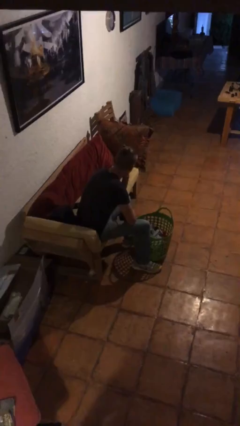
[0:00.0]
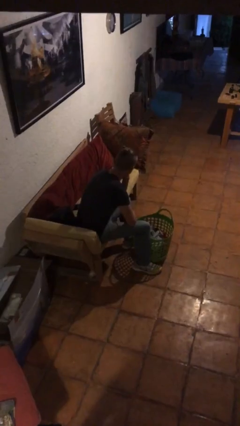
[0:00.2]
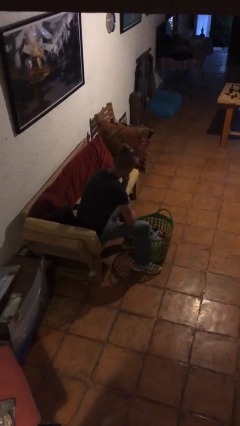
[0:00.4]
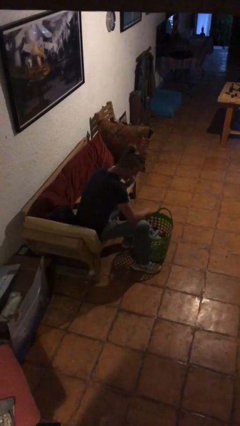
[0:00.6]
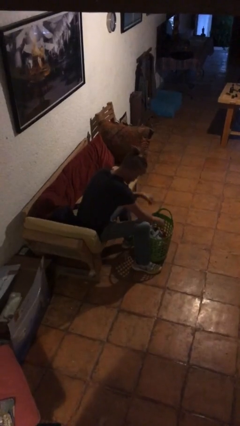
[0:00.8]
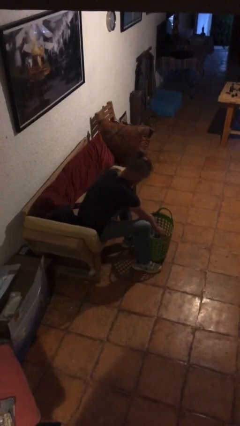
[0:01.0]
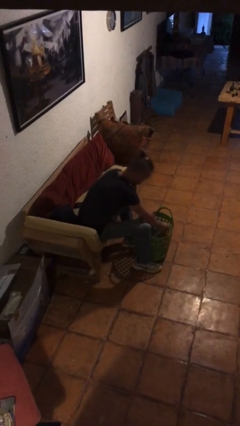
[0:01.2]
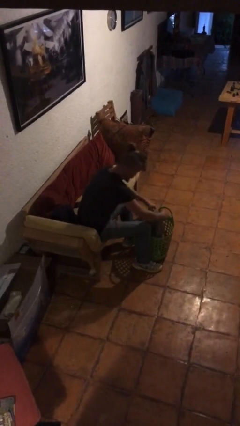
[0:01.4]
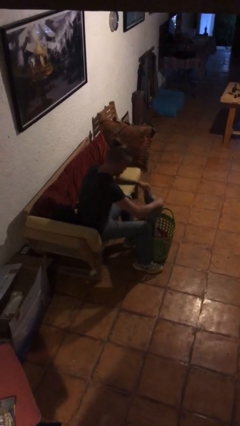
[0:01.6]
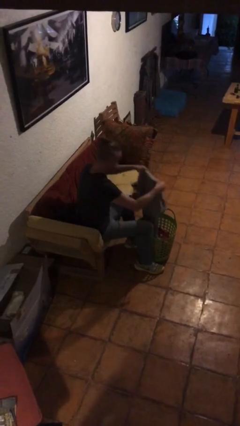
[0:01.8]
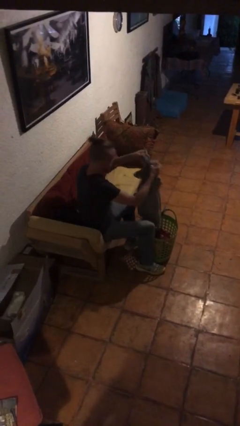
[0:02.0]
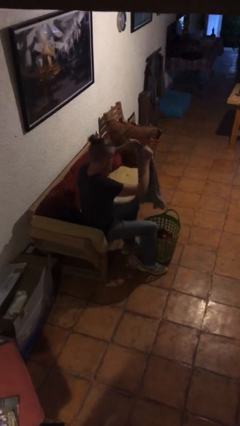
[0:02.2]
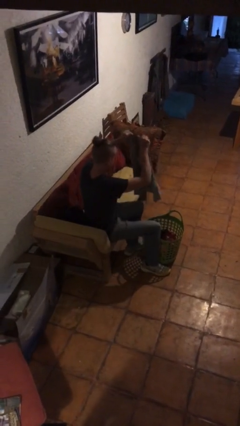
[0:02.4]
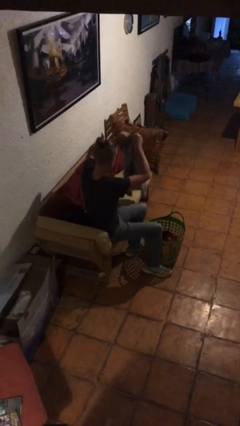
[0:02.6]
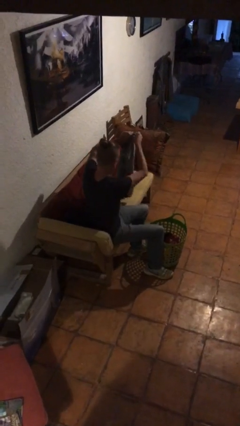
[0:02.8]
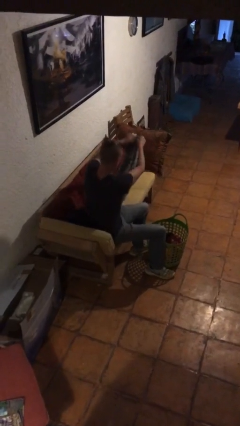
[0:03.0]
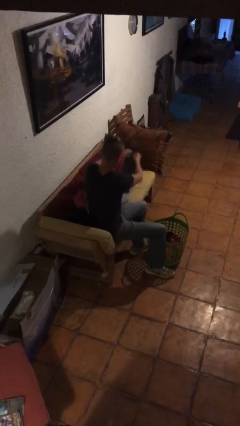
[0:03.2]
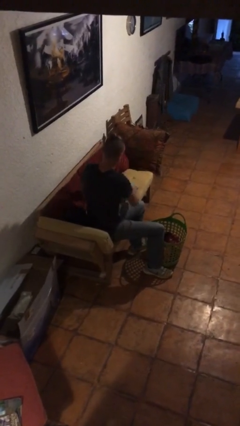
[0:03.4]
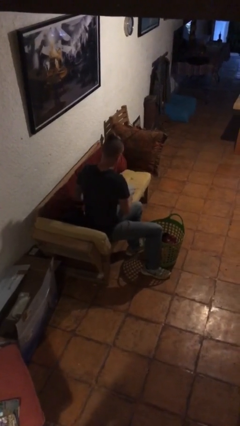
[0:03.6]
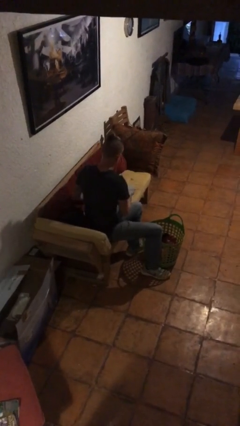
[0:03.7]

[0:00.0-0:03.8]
person folds shirt

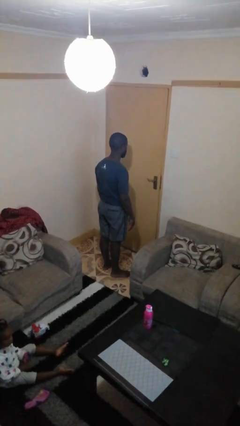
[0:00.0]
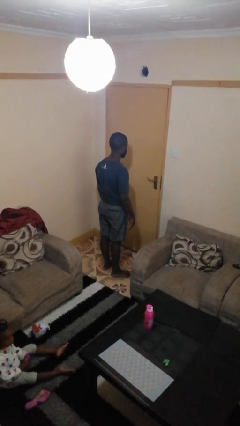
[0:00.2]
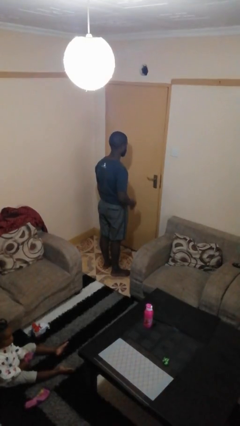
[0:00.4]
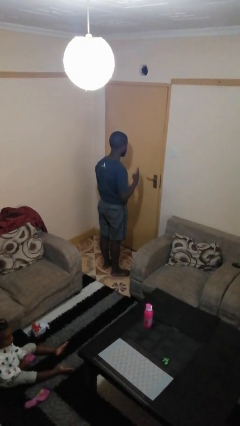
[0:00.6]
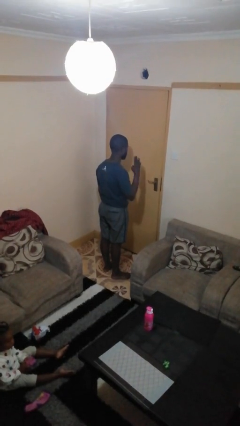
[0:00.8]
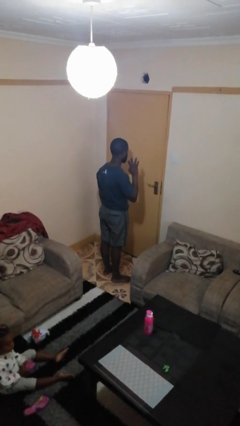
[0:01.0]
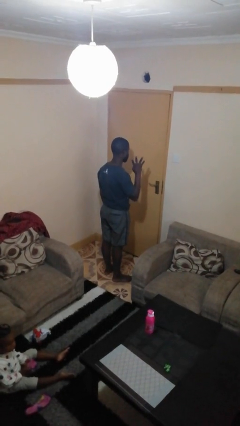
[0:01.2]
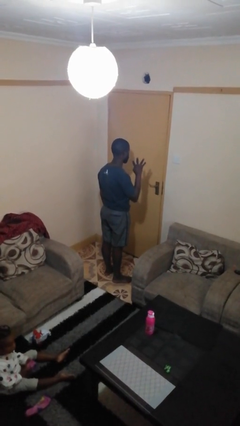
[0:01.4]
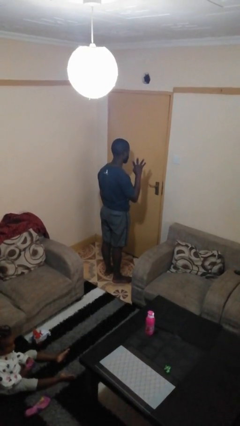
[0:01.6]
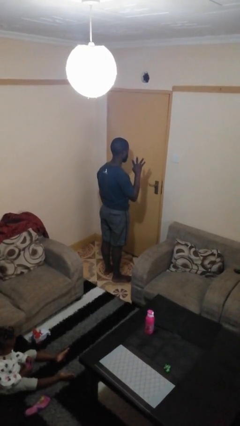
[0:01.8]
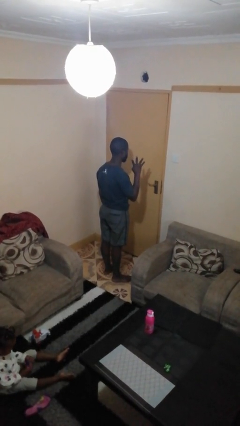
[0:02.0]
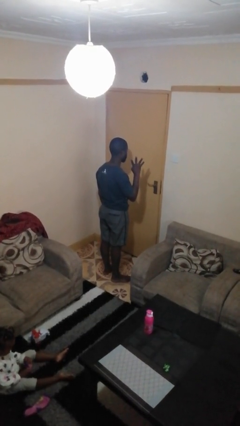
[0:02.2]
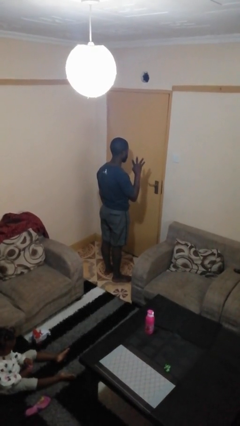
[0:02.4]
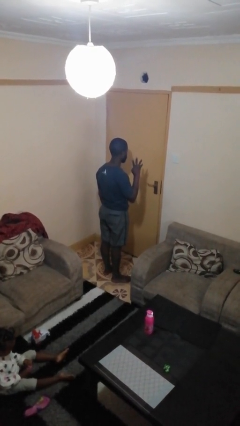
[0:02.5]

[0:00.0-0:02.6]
person gestures number four

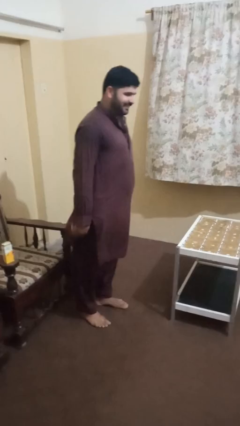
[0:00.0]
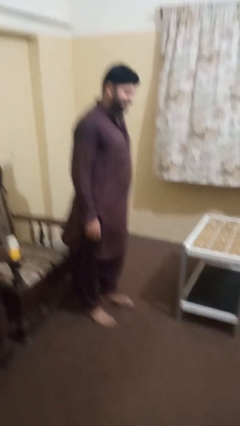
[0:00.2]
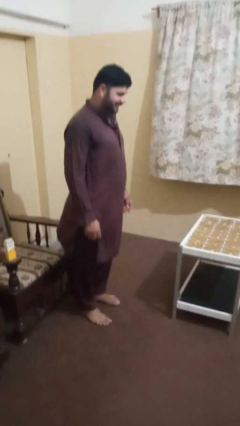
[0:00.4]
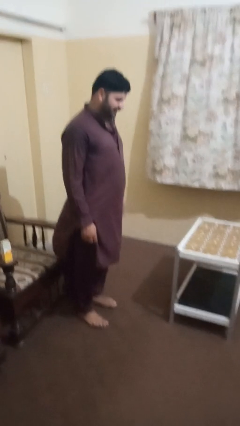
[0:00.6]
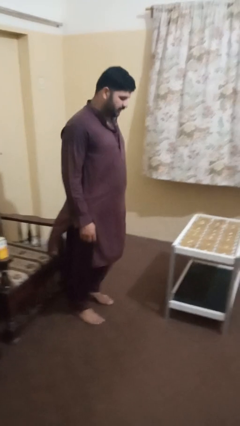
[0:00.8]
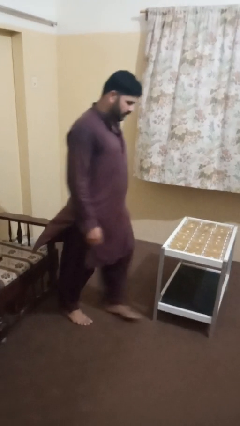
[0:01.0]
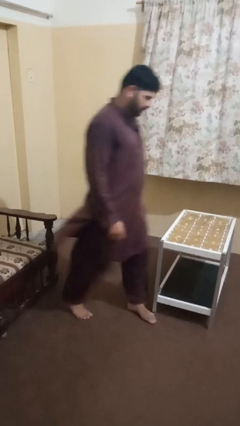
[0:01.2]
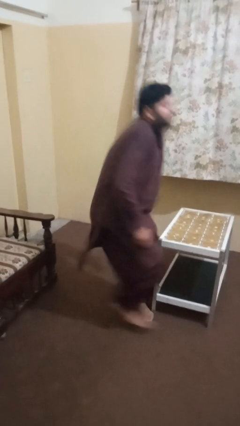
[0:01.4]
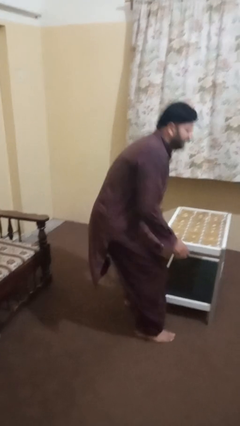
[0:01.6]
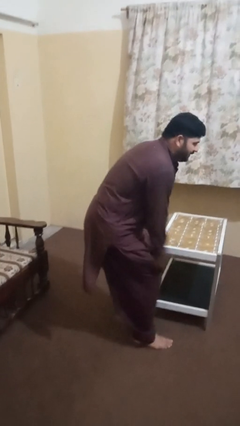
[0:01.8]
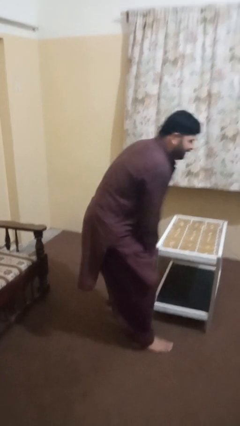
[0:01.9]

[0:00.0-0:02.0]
person bumps into table

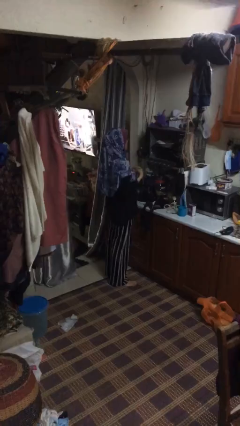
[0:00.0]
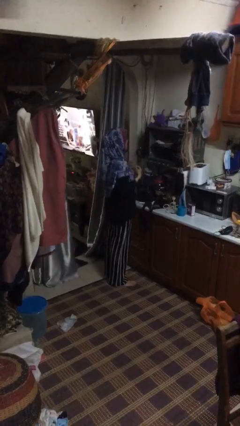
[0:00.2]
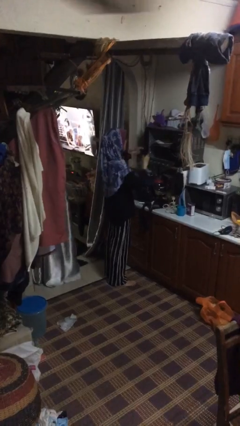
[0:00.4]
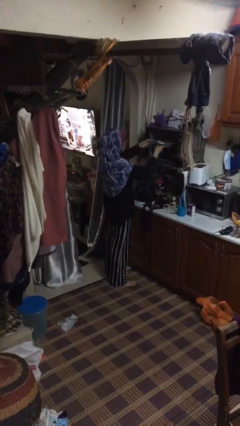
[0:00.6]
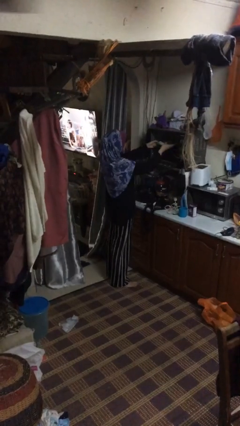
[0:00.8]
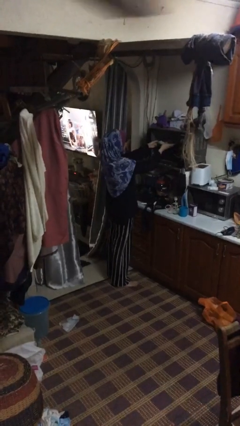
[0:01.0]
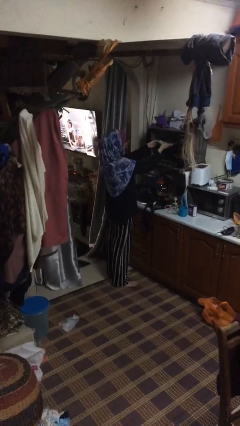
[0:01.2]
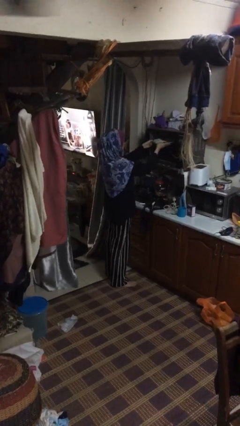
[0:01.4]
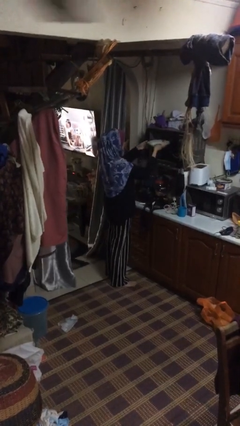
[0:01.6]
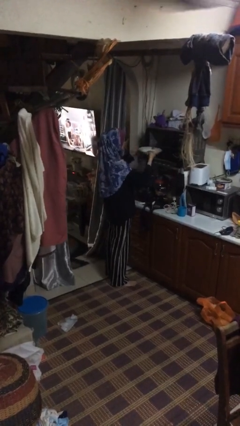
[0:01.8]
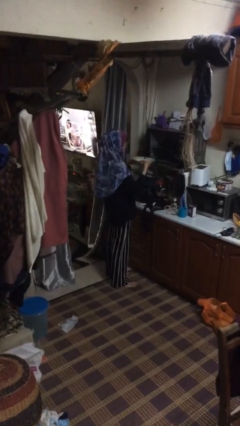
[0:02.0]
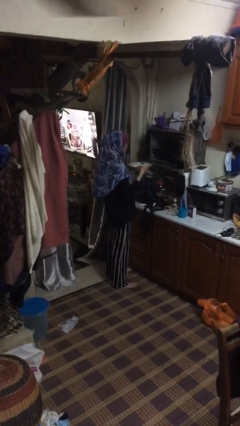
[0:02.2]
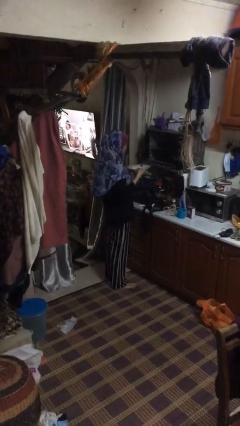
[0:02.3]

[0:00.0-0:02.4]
person takes object from oven

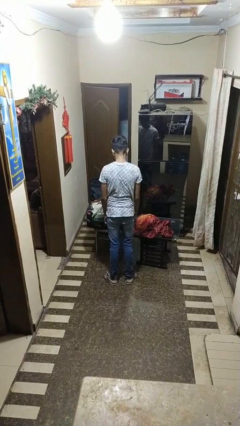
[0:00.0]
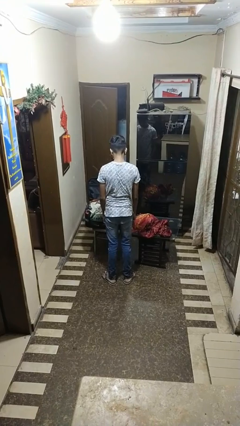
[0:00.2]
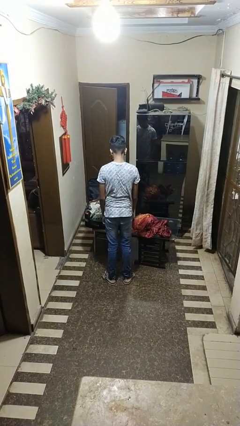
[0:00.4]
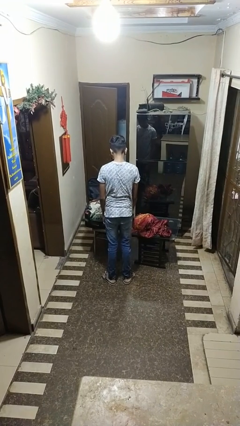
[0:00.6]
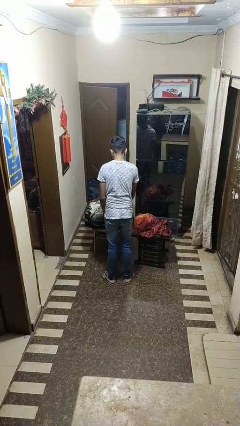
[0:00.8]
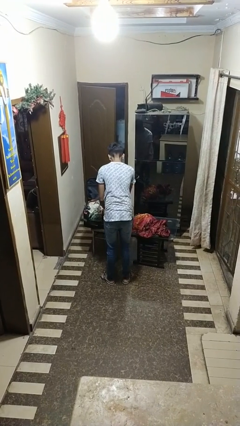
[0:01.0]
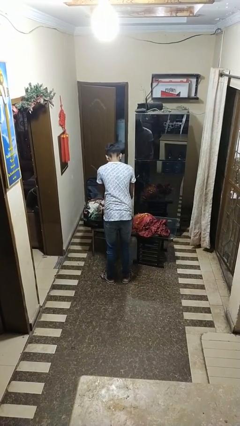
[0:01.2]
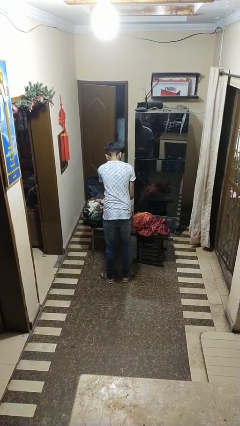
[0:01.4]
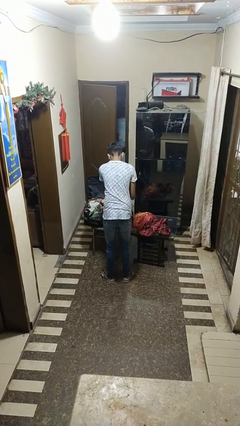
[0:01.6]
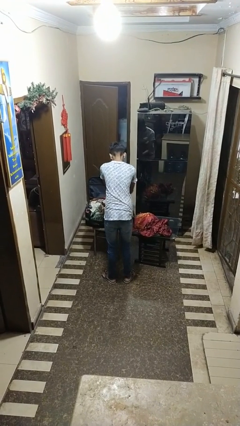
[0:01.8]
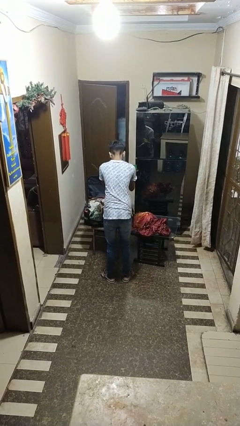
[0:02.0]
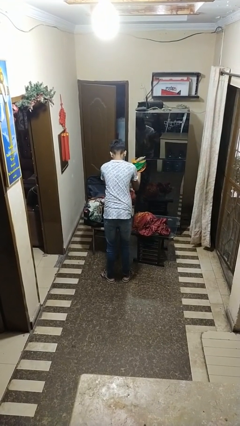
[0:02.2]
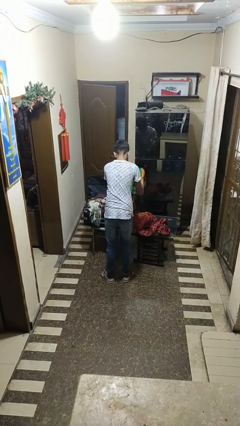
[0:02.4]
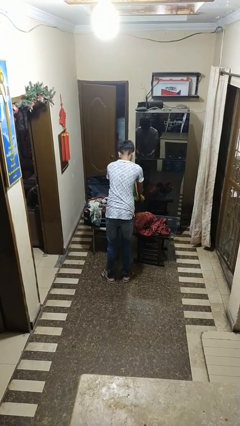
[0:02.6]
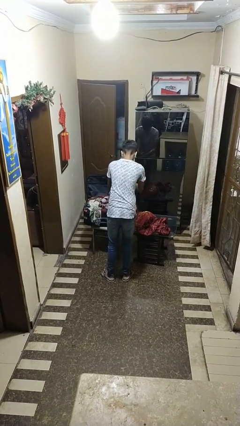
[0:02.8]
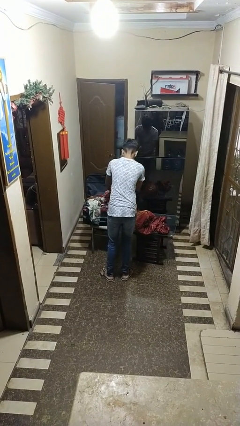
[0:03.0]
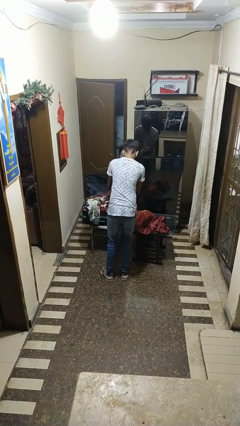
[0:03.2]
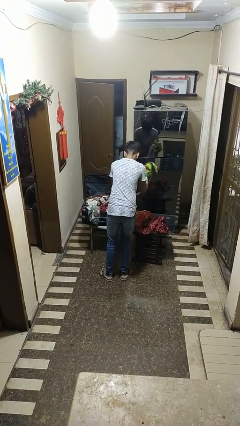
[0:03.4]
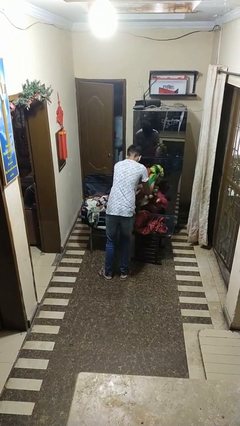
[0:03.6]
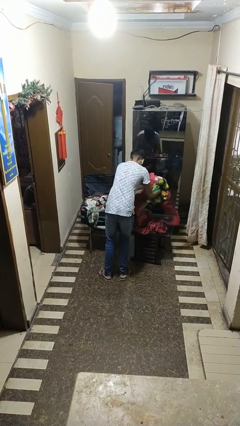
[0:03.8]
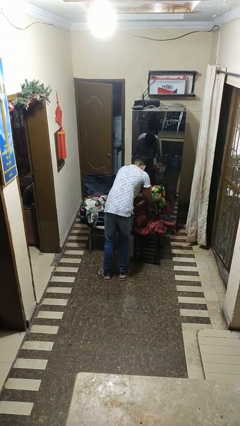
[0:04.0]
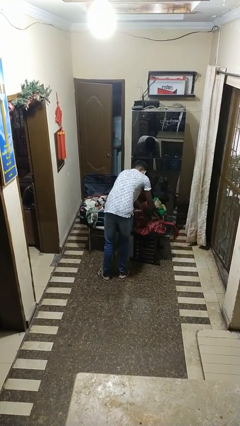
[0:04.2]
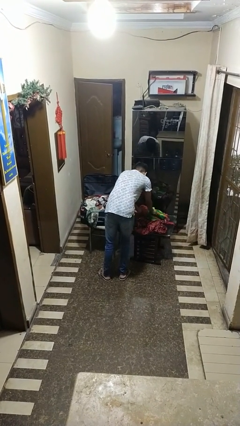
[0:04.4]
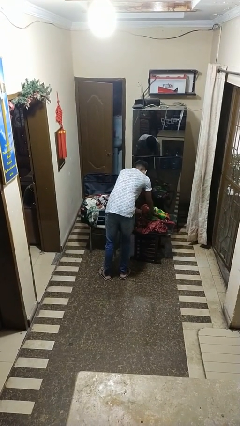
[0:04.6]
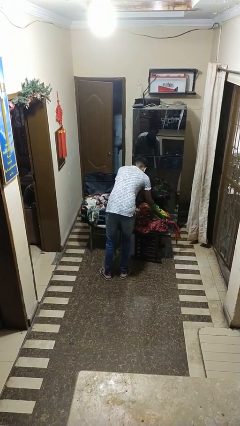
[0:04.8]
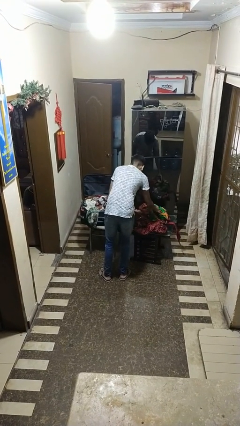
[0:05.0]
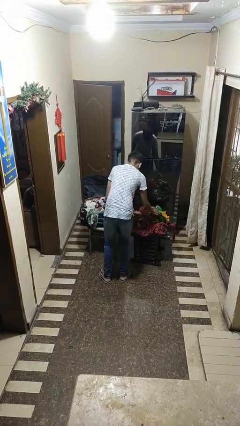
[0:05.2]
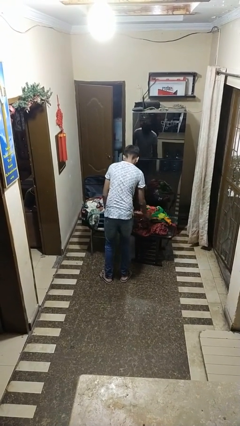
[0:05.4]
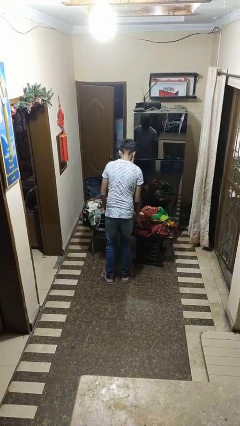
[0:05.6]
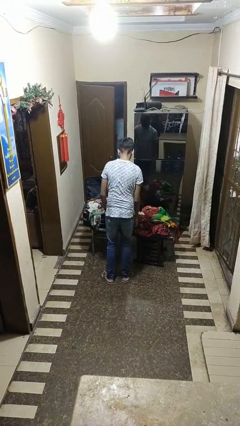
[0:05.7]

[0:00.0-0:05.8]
person unloads clothes from suitcase

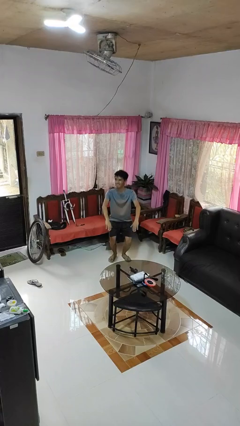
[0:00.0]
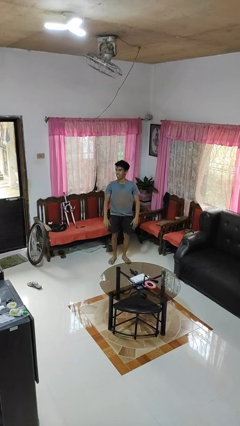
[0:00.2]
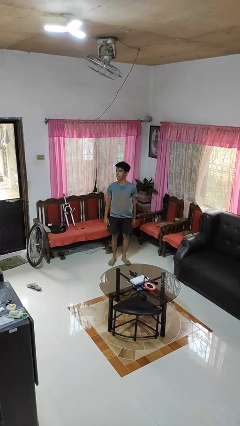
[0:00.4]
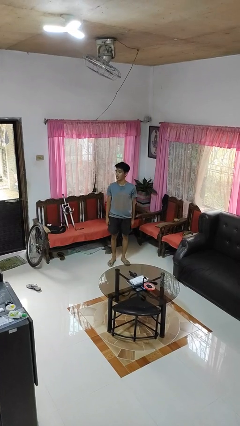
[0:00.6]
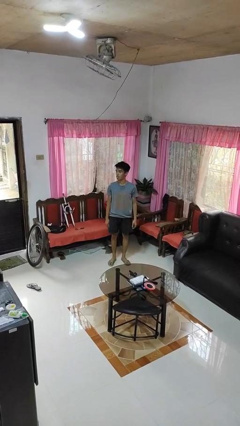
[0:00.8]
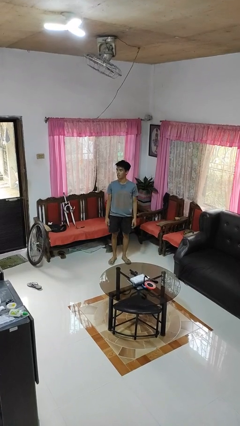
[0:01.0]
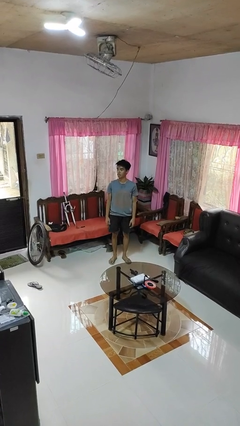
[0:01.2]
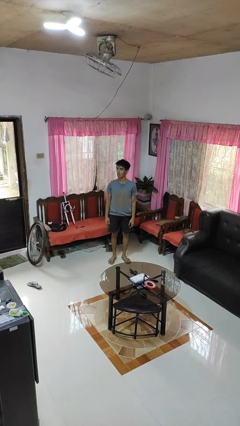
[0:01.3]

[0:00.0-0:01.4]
person stands up
